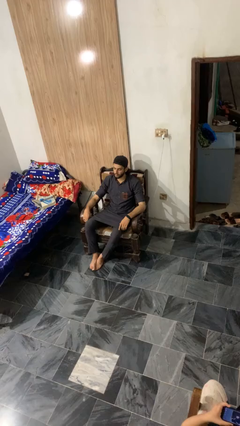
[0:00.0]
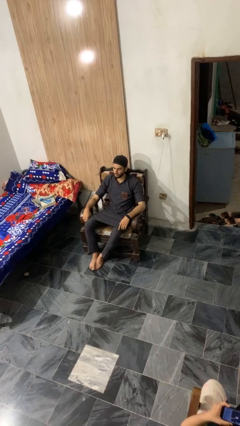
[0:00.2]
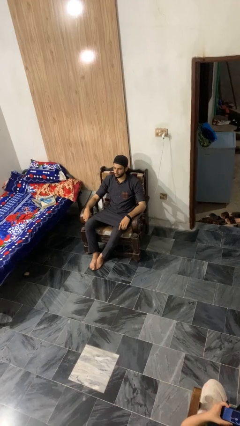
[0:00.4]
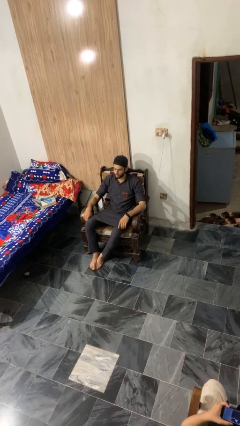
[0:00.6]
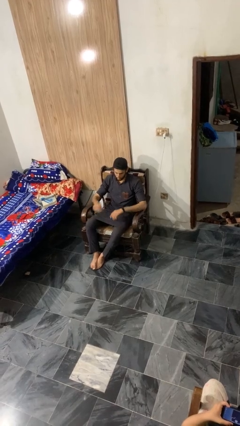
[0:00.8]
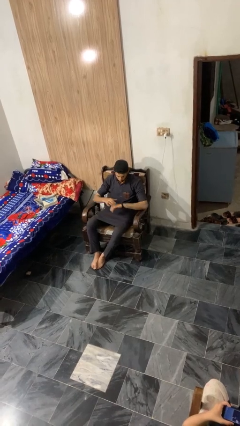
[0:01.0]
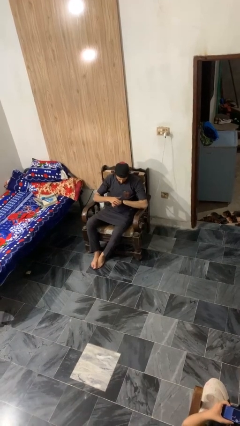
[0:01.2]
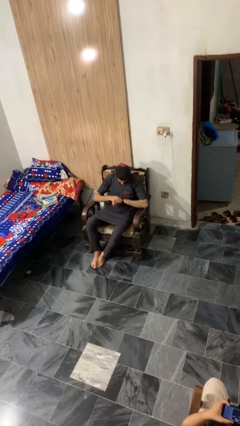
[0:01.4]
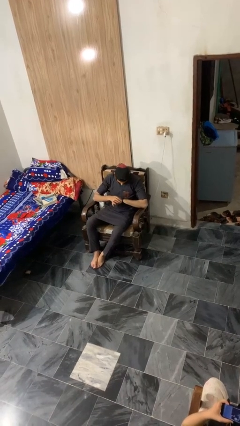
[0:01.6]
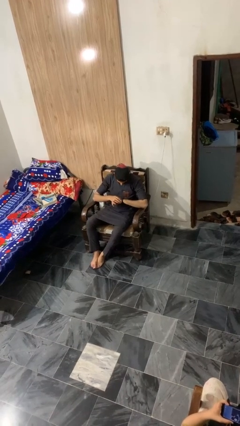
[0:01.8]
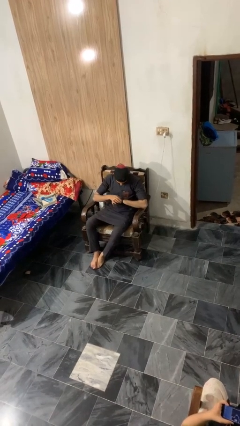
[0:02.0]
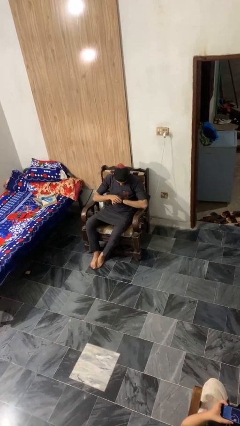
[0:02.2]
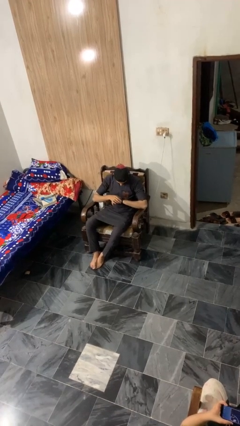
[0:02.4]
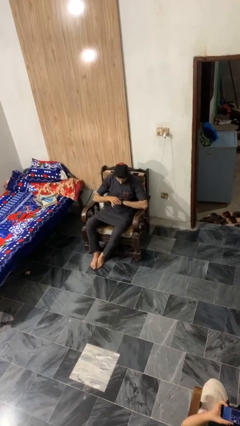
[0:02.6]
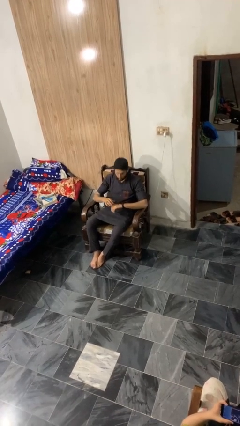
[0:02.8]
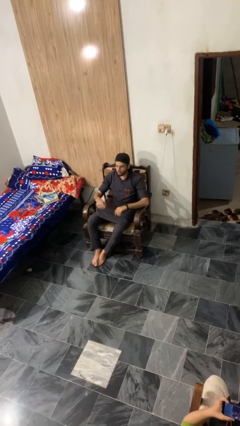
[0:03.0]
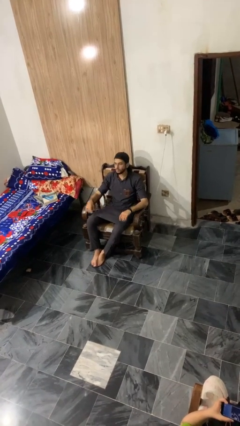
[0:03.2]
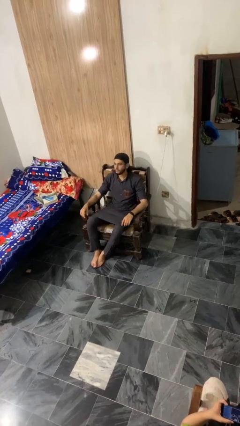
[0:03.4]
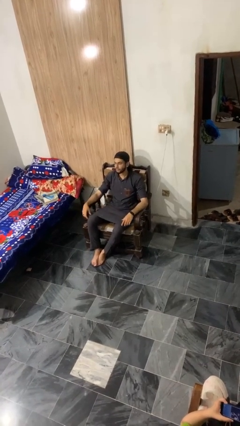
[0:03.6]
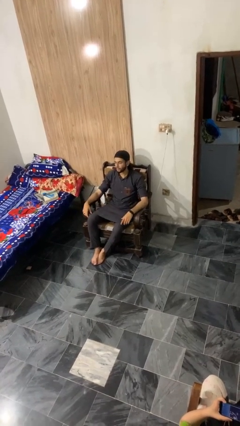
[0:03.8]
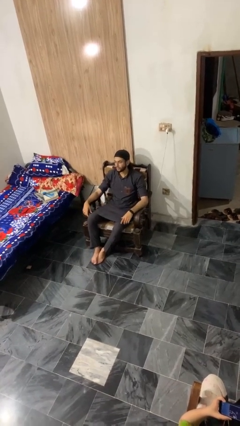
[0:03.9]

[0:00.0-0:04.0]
person looks at wristwatch

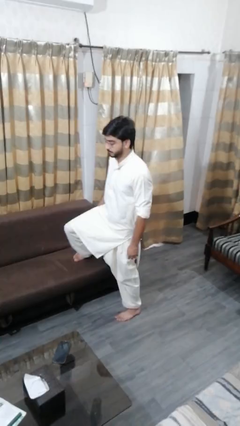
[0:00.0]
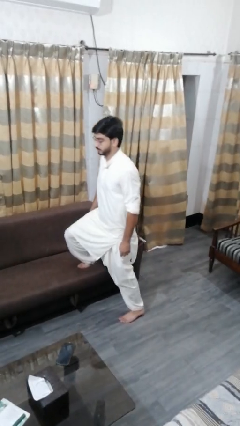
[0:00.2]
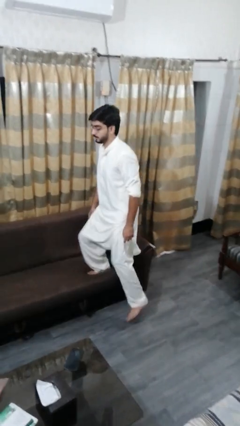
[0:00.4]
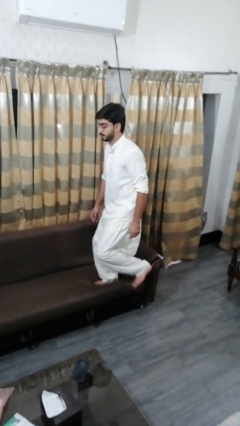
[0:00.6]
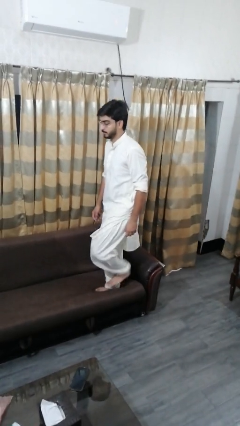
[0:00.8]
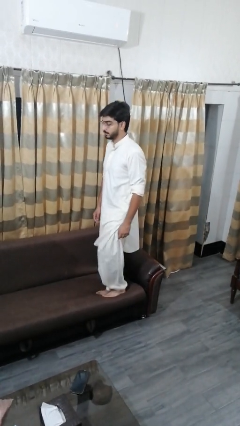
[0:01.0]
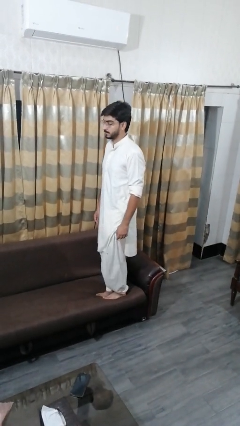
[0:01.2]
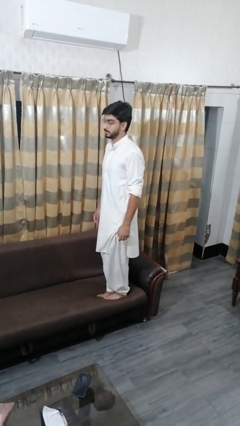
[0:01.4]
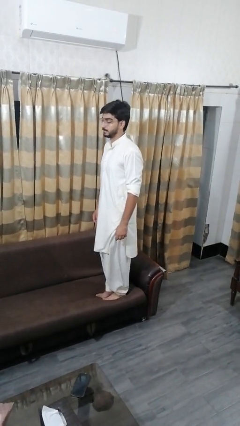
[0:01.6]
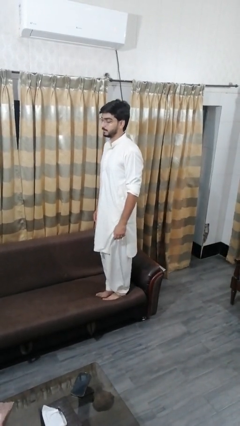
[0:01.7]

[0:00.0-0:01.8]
person climbs on couch

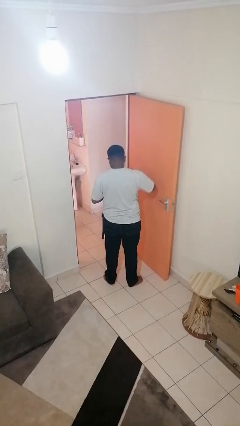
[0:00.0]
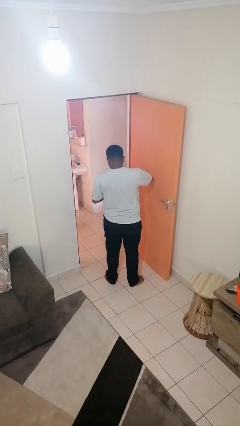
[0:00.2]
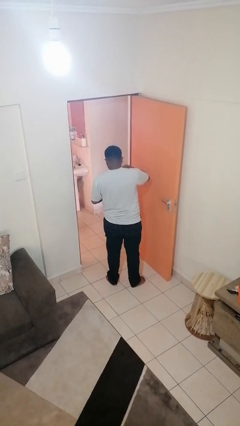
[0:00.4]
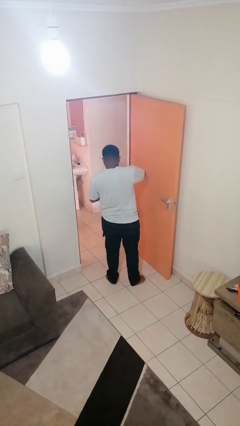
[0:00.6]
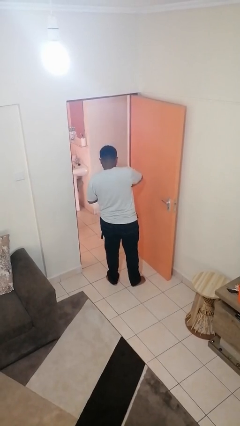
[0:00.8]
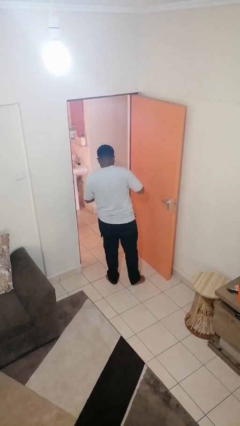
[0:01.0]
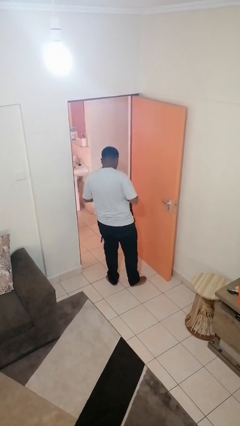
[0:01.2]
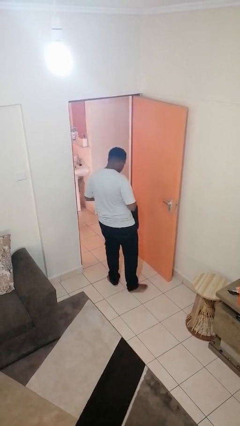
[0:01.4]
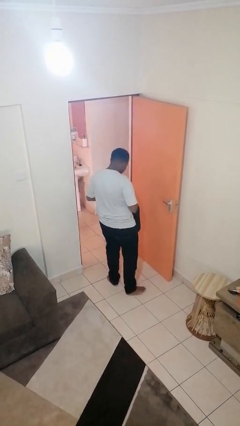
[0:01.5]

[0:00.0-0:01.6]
person puts object into backpack

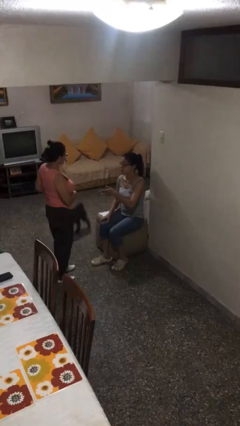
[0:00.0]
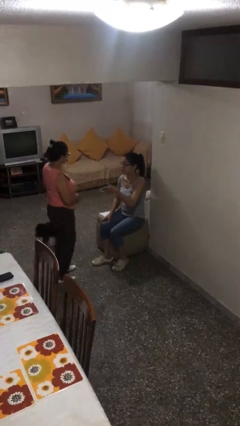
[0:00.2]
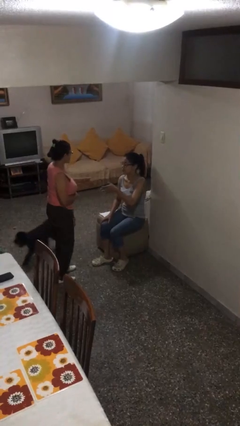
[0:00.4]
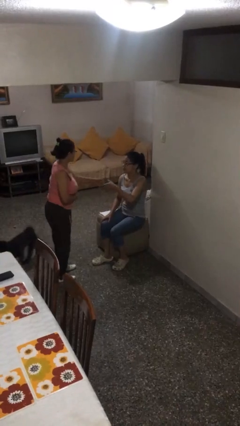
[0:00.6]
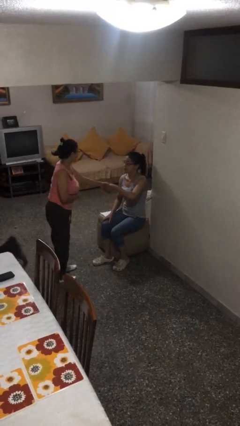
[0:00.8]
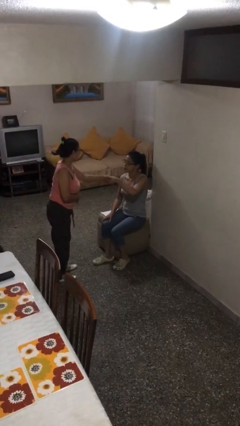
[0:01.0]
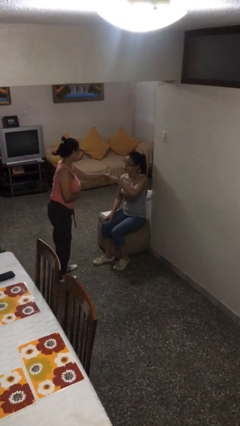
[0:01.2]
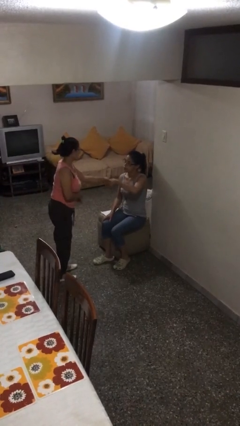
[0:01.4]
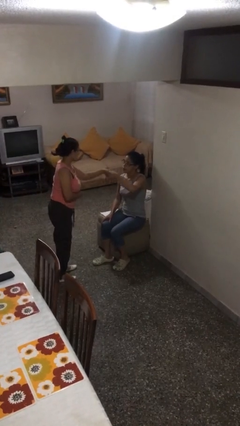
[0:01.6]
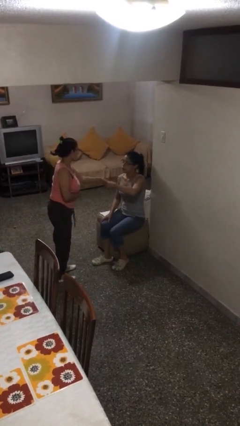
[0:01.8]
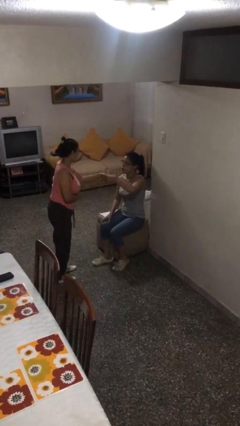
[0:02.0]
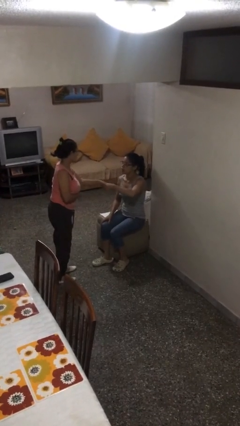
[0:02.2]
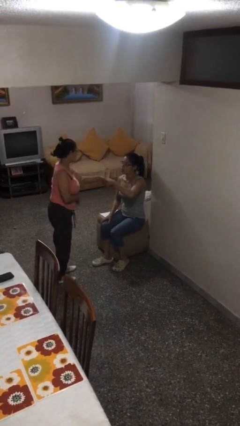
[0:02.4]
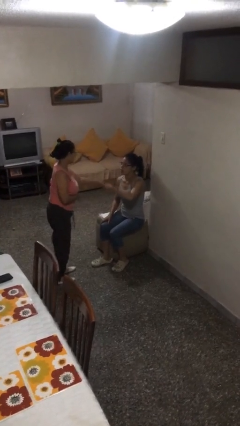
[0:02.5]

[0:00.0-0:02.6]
person shakes hand

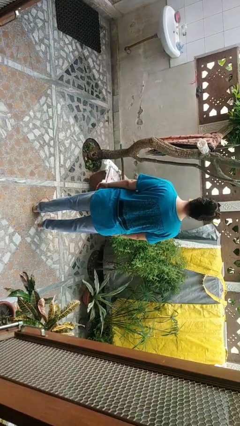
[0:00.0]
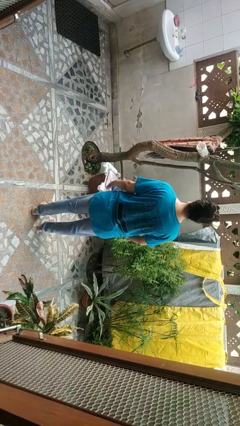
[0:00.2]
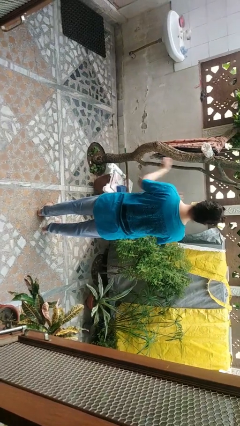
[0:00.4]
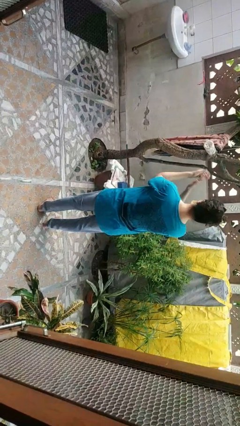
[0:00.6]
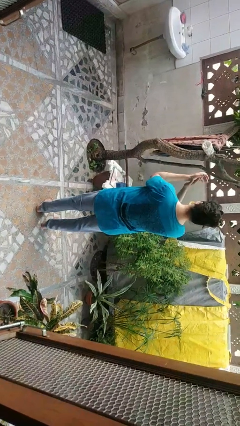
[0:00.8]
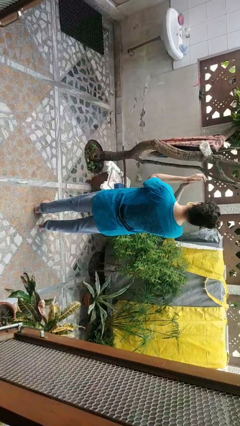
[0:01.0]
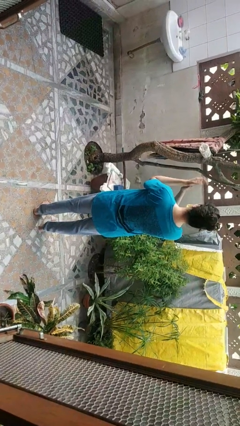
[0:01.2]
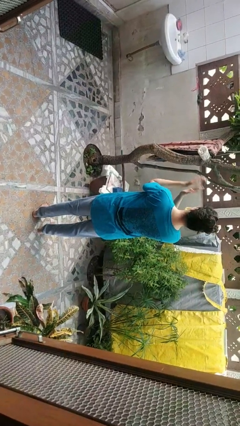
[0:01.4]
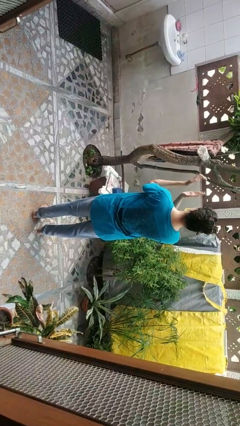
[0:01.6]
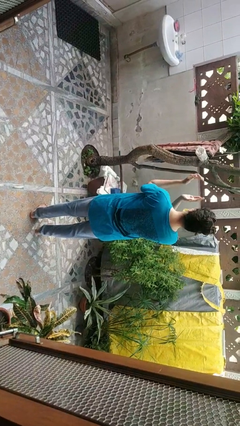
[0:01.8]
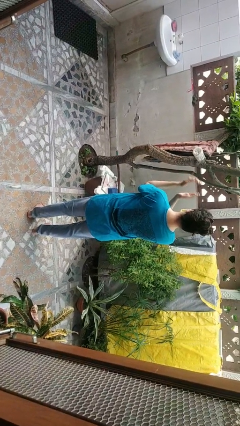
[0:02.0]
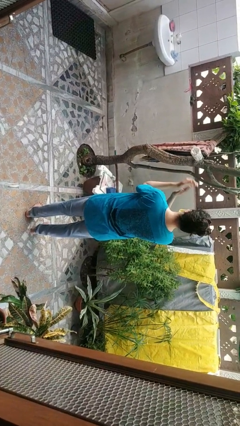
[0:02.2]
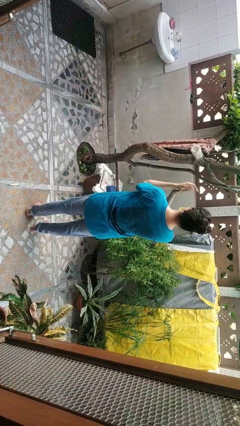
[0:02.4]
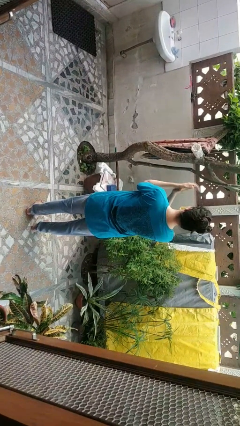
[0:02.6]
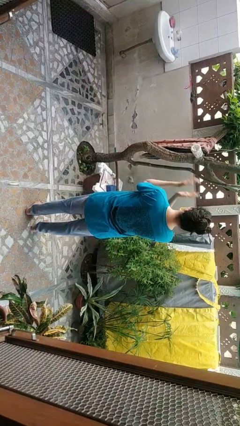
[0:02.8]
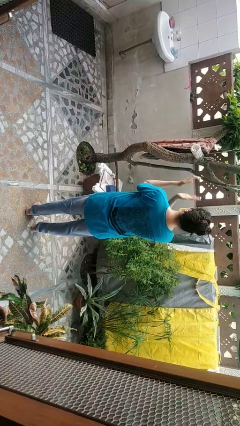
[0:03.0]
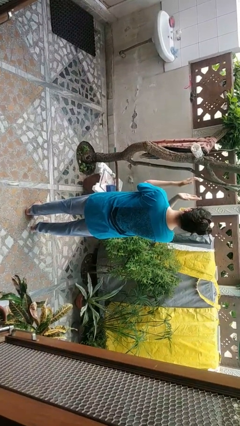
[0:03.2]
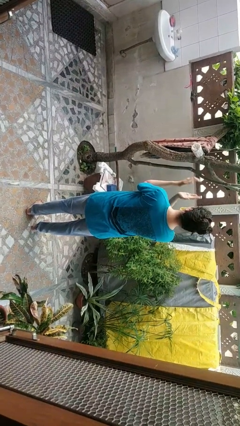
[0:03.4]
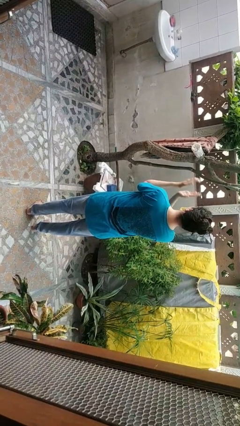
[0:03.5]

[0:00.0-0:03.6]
person claps hands

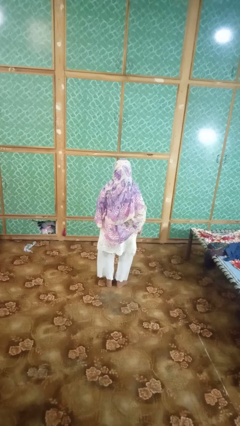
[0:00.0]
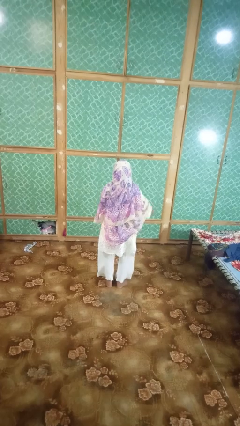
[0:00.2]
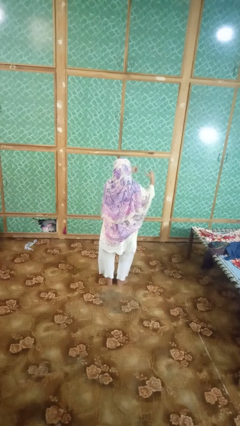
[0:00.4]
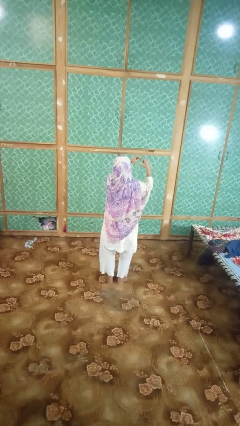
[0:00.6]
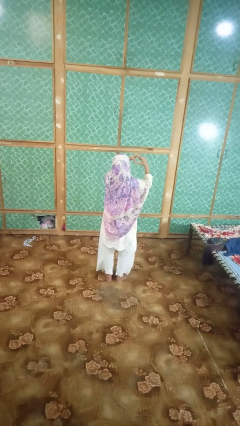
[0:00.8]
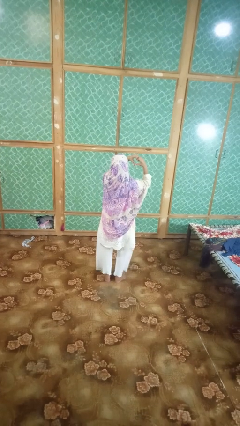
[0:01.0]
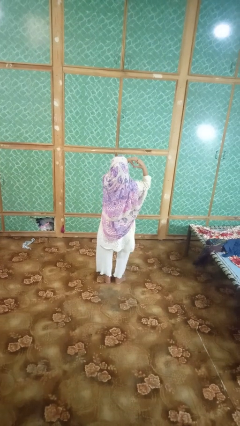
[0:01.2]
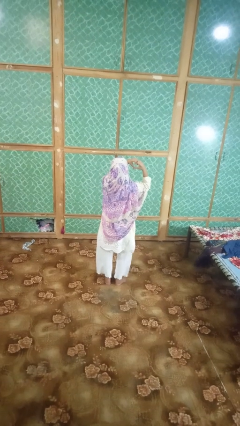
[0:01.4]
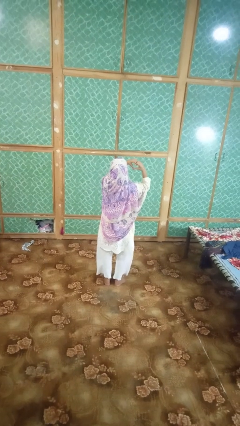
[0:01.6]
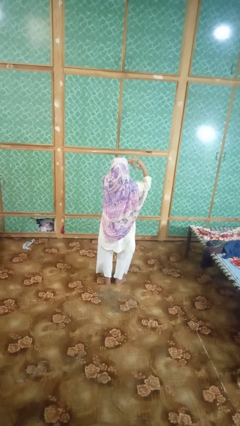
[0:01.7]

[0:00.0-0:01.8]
person gestures heart

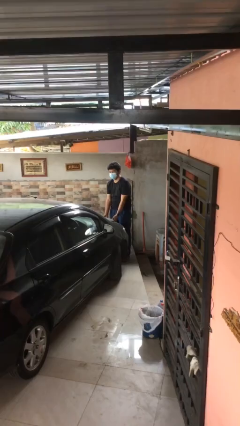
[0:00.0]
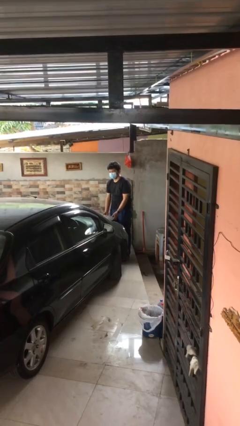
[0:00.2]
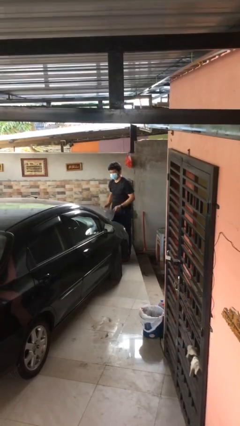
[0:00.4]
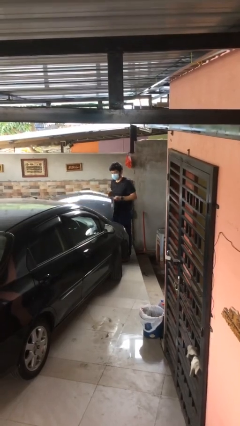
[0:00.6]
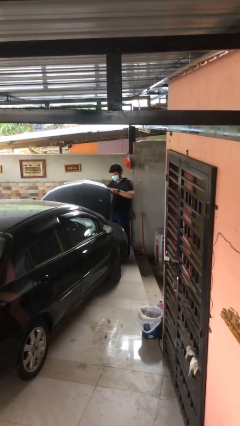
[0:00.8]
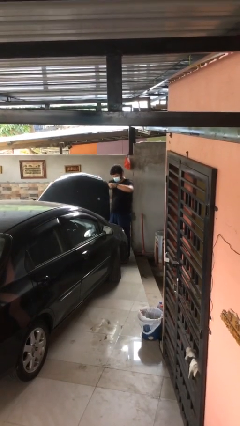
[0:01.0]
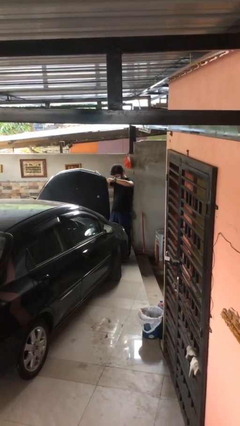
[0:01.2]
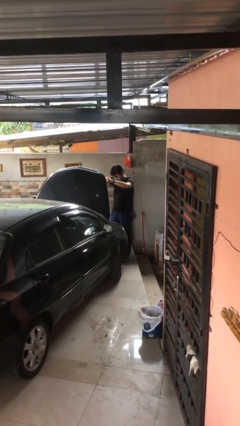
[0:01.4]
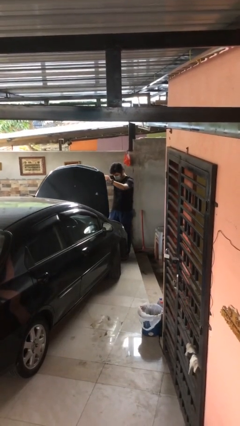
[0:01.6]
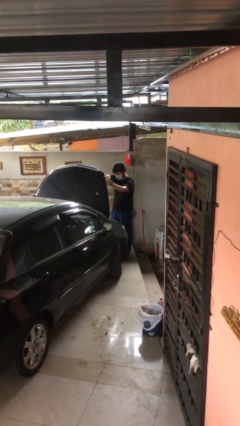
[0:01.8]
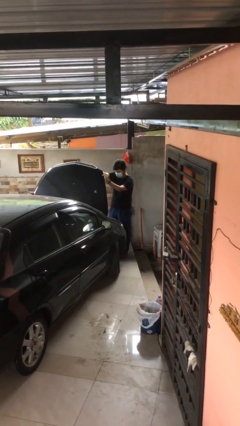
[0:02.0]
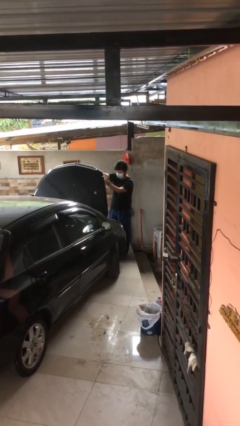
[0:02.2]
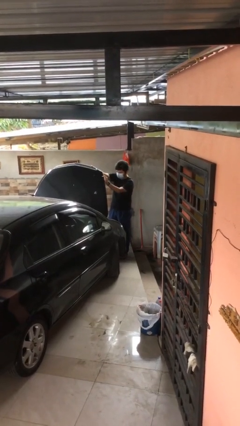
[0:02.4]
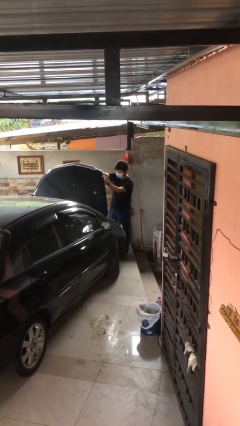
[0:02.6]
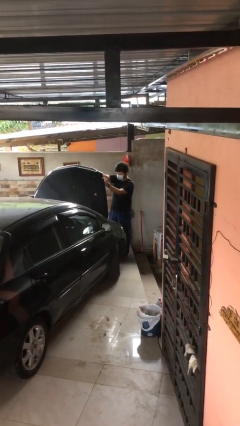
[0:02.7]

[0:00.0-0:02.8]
person opens car hood
